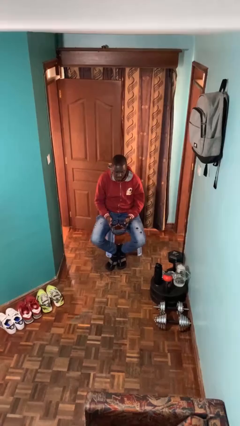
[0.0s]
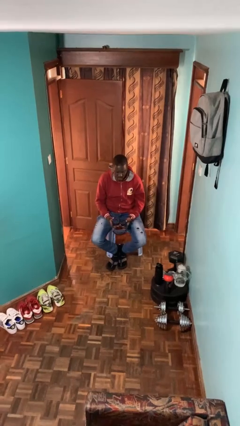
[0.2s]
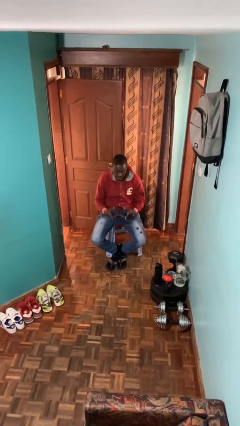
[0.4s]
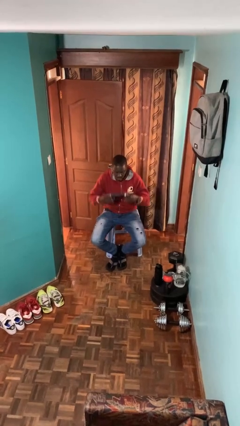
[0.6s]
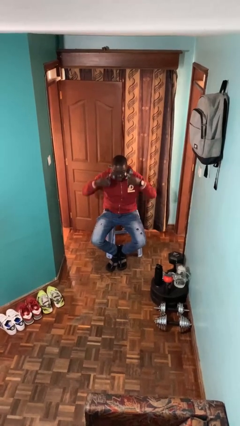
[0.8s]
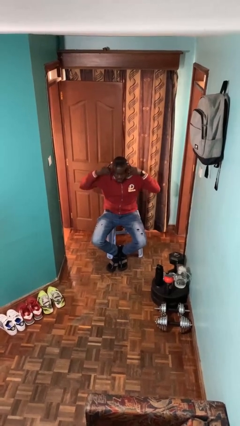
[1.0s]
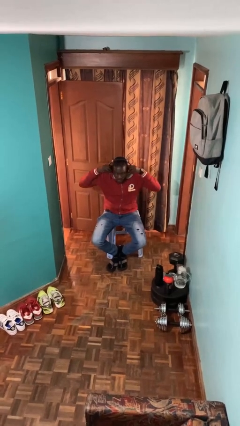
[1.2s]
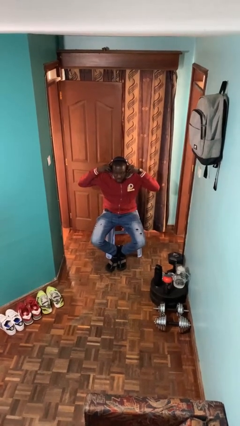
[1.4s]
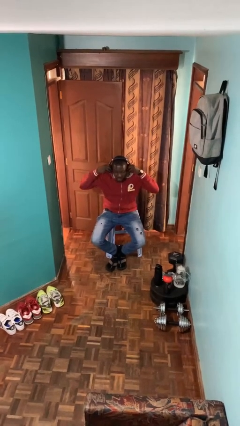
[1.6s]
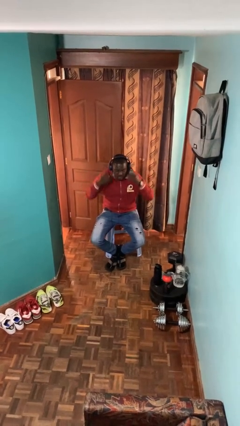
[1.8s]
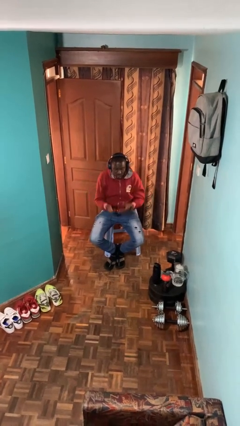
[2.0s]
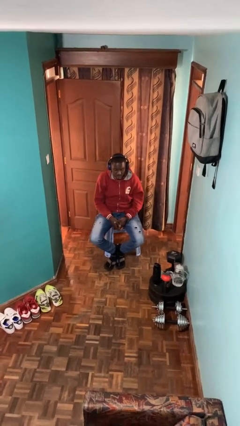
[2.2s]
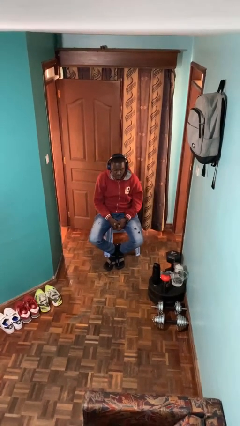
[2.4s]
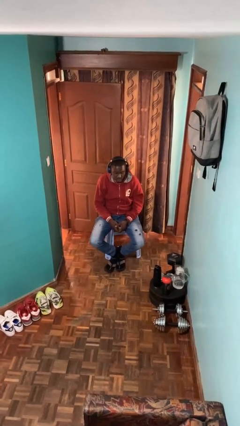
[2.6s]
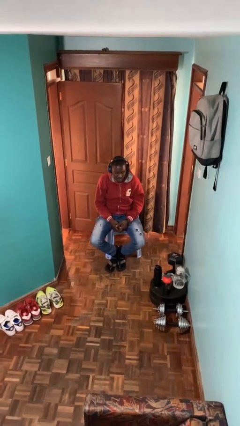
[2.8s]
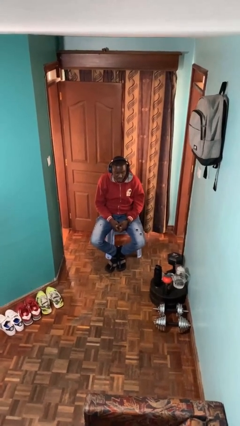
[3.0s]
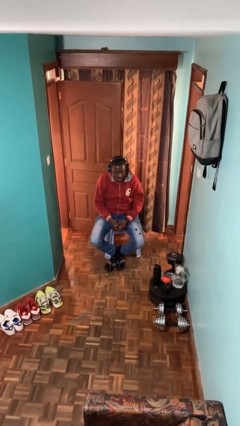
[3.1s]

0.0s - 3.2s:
person puts on headphones

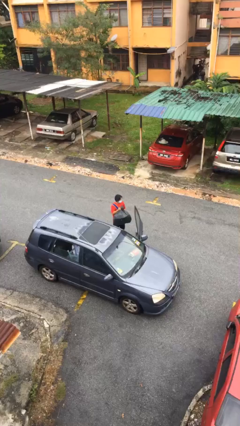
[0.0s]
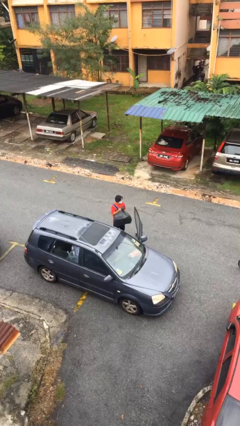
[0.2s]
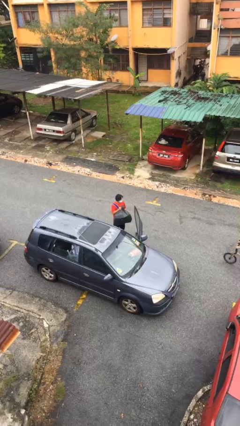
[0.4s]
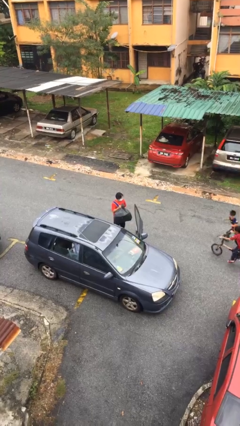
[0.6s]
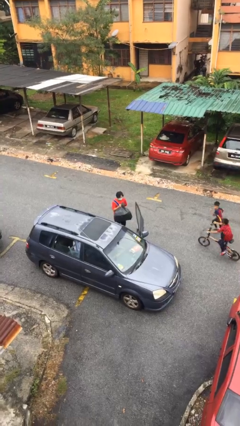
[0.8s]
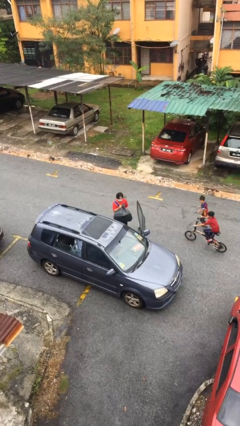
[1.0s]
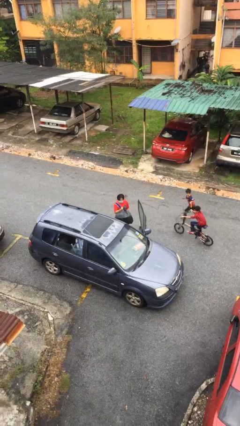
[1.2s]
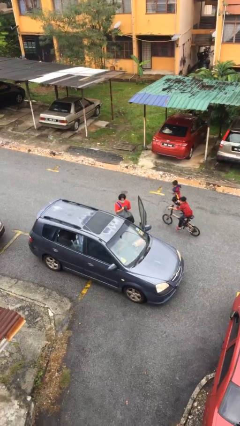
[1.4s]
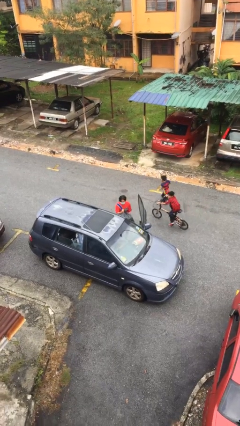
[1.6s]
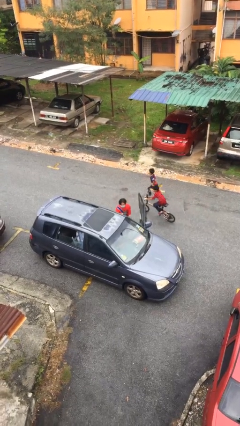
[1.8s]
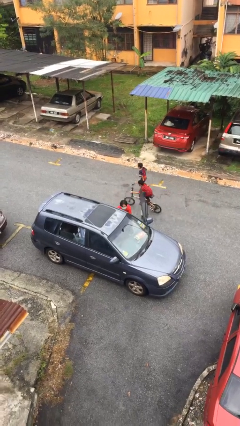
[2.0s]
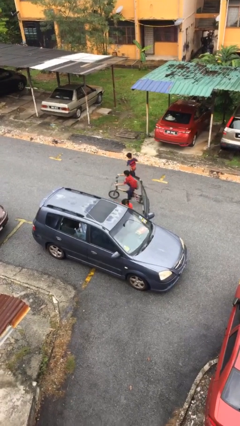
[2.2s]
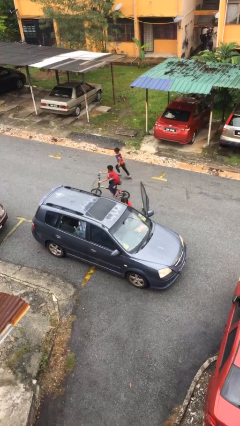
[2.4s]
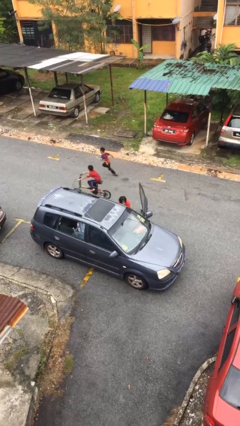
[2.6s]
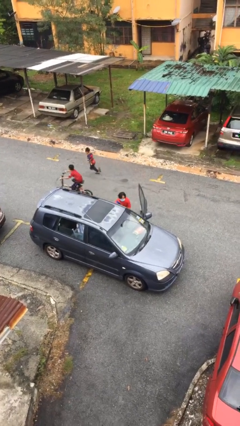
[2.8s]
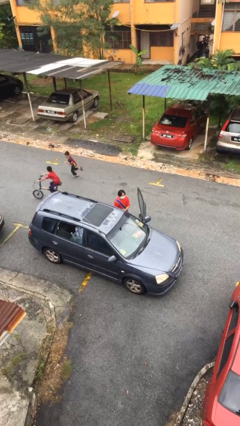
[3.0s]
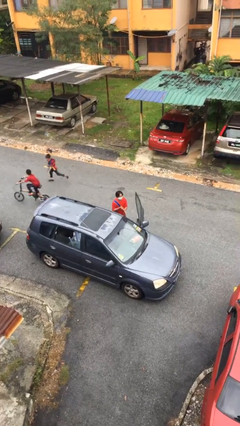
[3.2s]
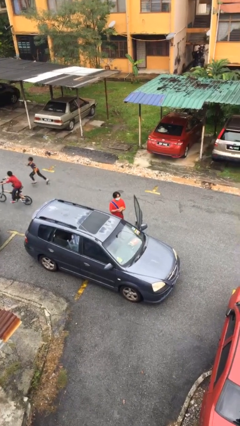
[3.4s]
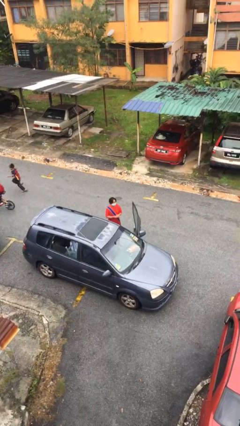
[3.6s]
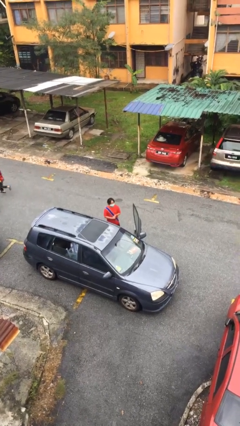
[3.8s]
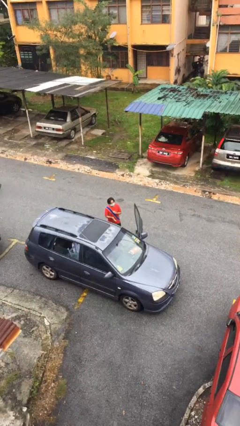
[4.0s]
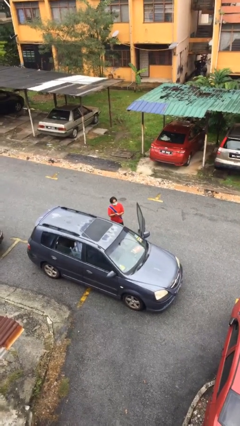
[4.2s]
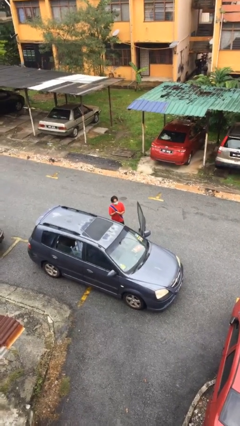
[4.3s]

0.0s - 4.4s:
person loads car

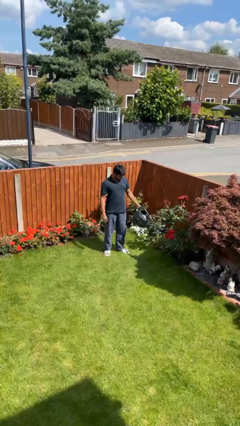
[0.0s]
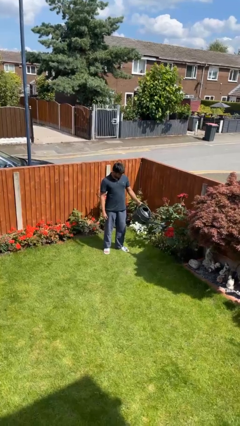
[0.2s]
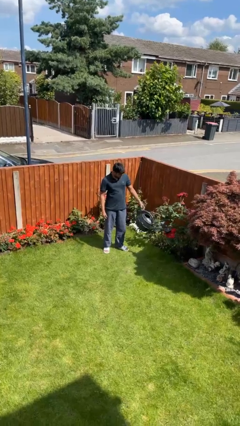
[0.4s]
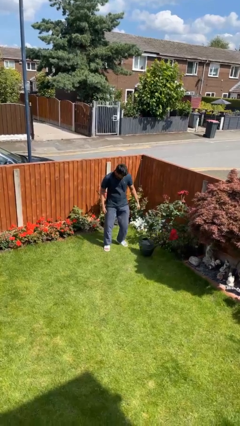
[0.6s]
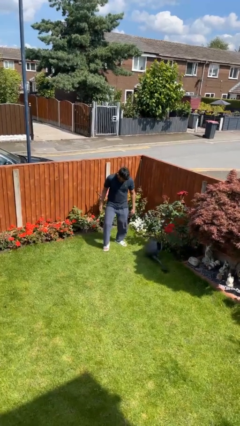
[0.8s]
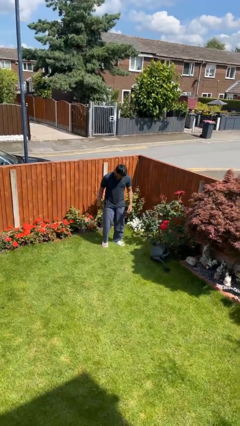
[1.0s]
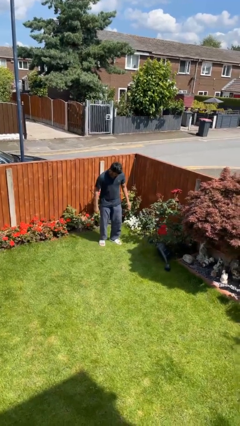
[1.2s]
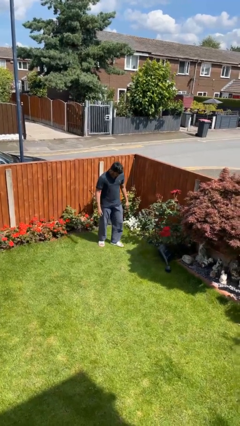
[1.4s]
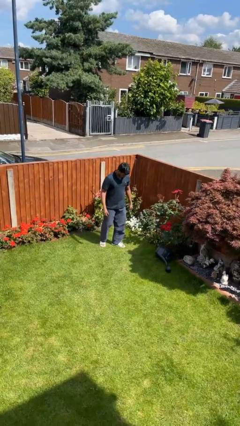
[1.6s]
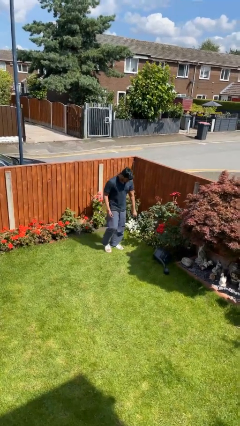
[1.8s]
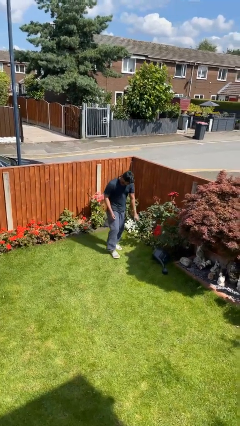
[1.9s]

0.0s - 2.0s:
person drops object

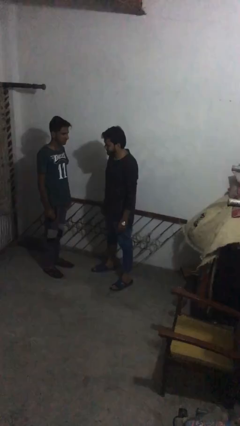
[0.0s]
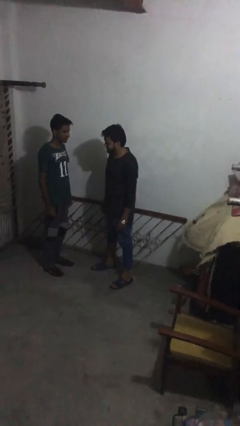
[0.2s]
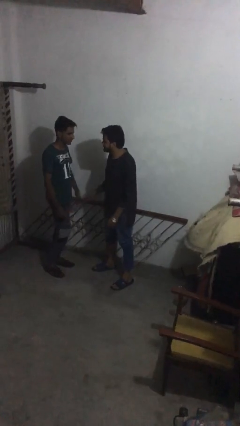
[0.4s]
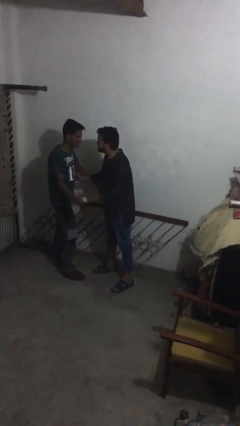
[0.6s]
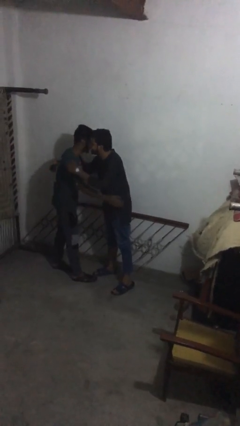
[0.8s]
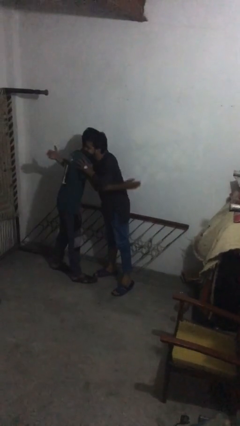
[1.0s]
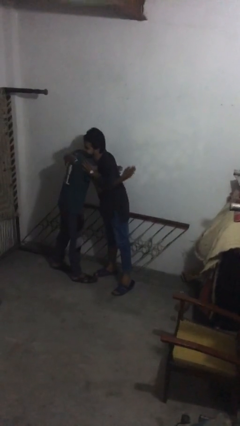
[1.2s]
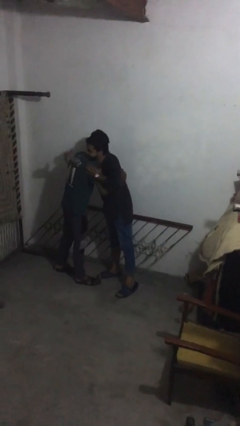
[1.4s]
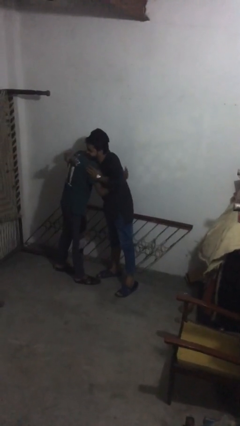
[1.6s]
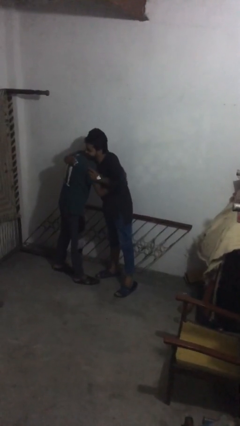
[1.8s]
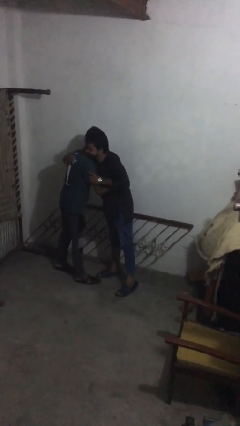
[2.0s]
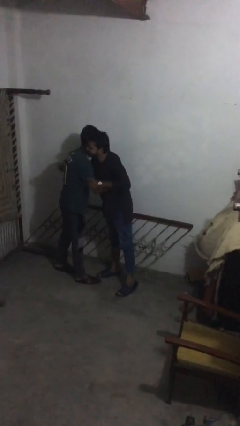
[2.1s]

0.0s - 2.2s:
person embraces person

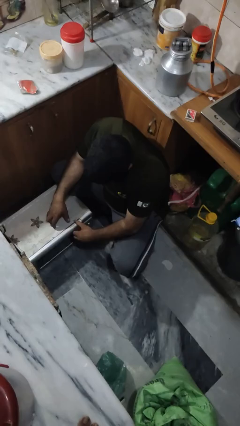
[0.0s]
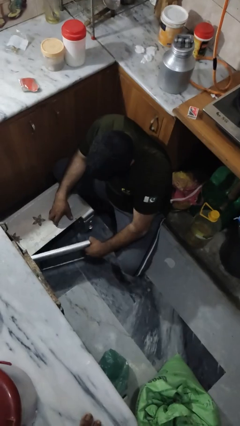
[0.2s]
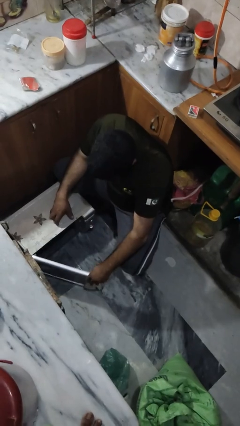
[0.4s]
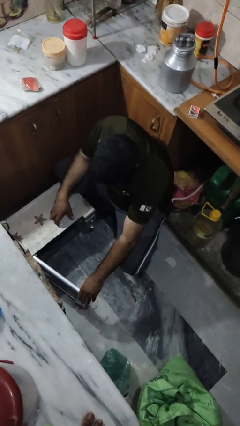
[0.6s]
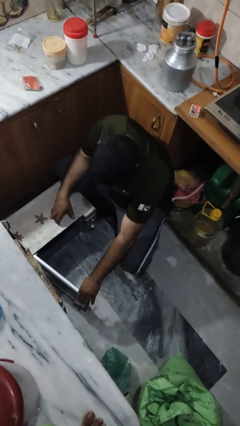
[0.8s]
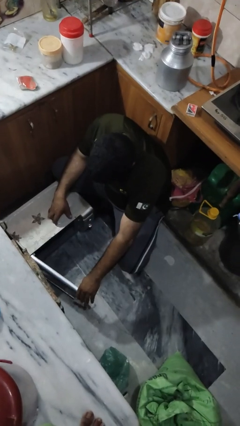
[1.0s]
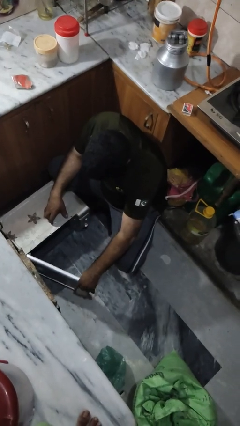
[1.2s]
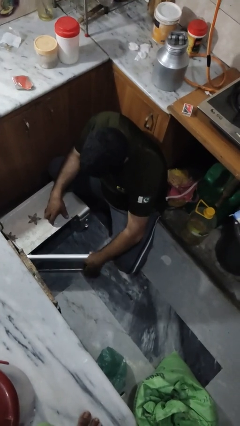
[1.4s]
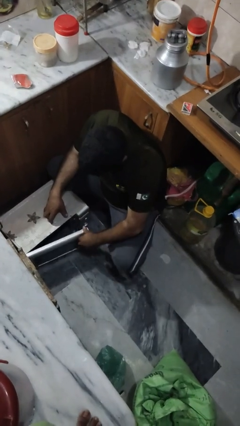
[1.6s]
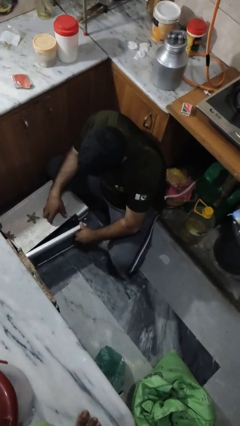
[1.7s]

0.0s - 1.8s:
person opens oven door

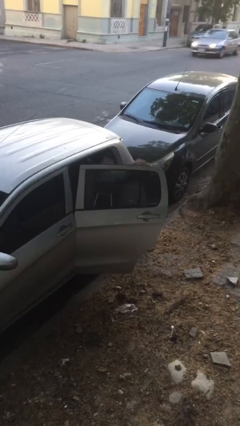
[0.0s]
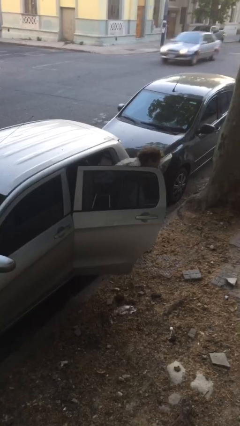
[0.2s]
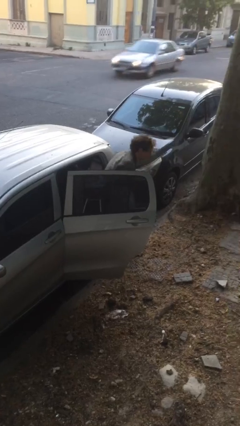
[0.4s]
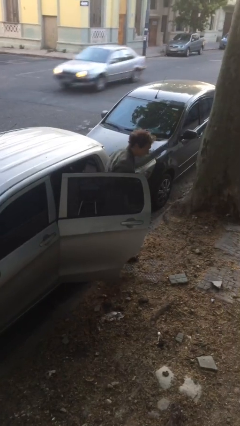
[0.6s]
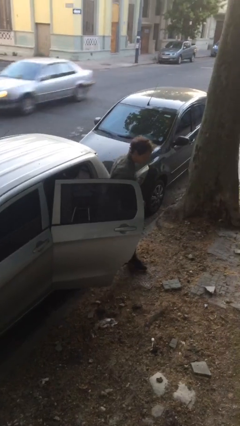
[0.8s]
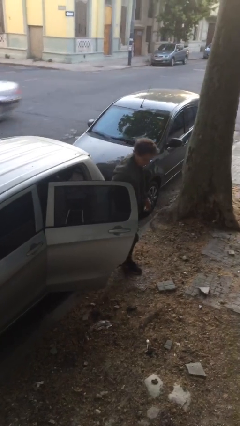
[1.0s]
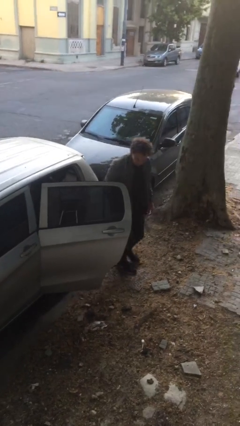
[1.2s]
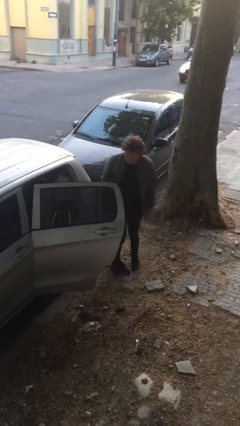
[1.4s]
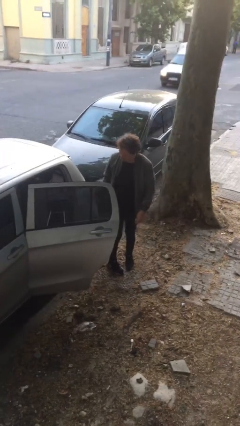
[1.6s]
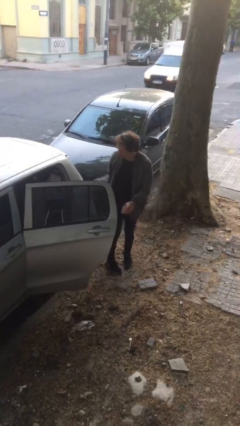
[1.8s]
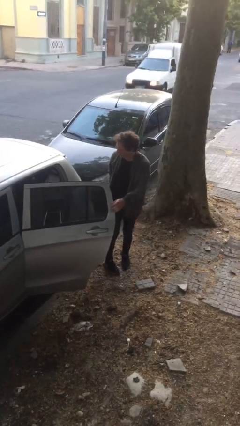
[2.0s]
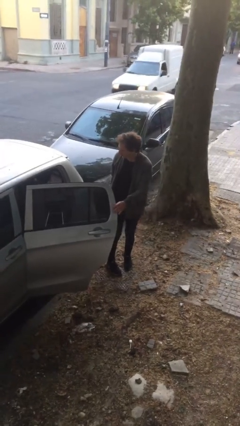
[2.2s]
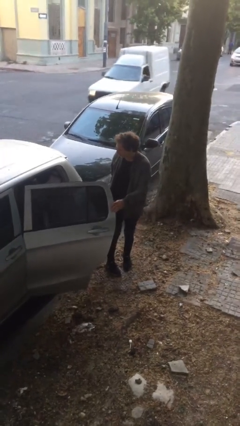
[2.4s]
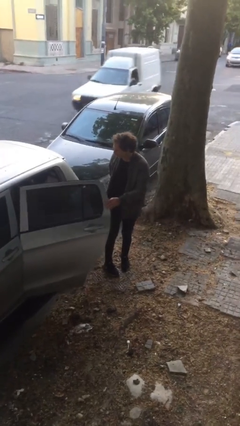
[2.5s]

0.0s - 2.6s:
person exits car

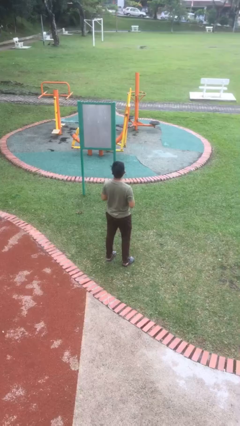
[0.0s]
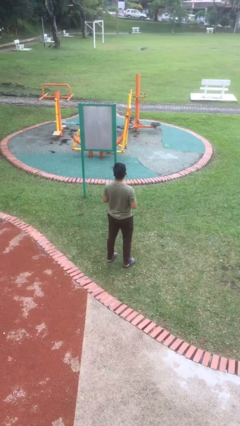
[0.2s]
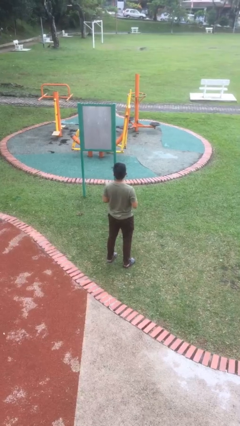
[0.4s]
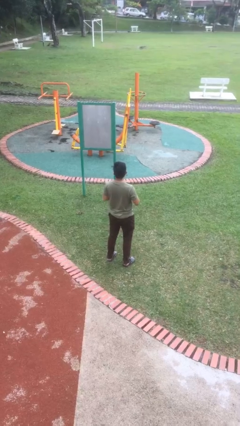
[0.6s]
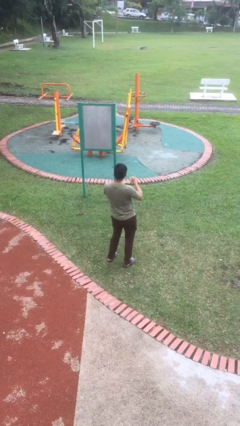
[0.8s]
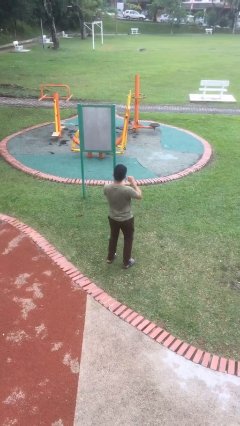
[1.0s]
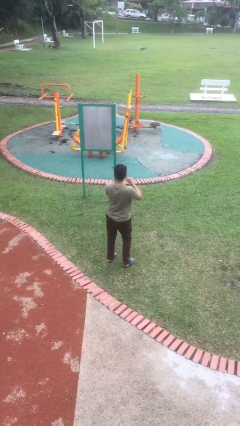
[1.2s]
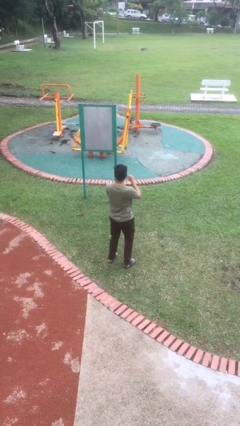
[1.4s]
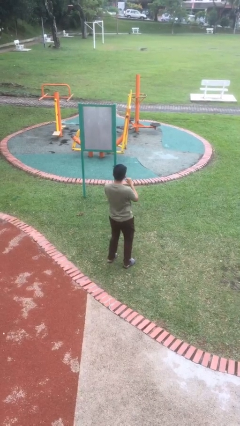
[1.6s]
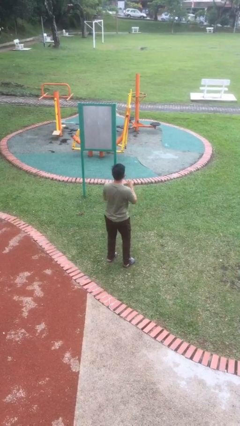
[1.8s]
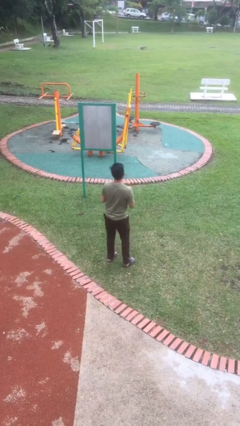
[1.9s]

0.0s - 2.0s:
person wiggles hips
